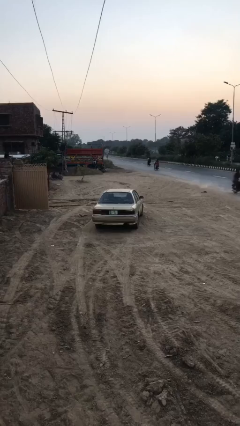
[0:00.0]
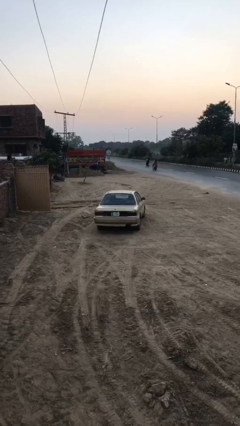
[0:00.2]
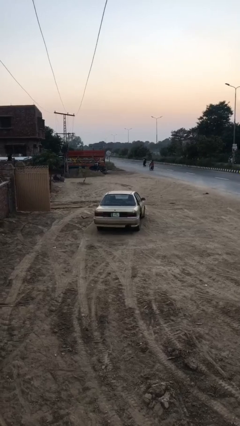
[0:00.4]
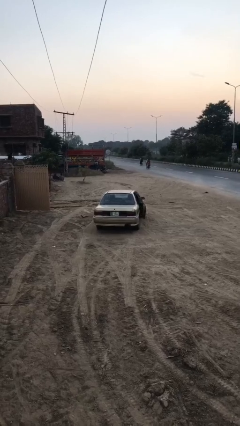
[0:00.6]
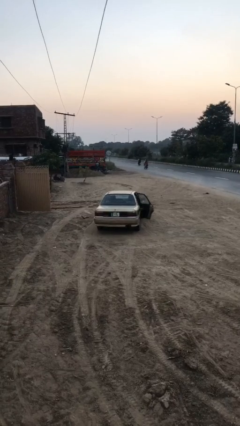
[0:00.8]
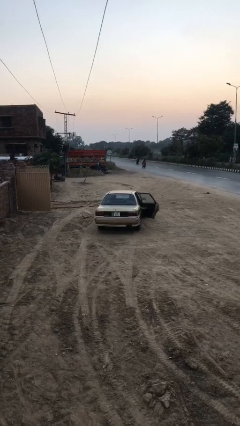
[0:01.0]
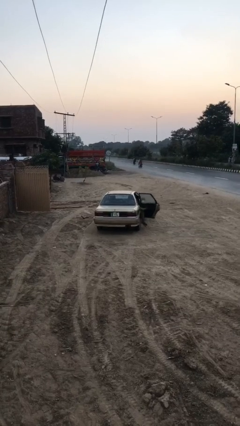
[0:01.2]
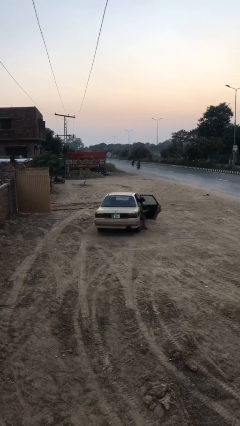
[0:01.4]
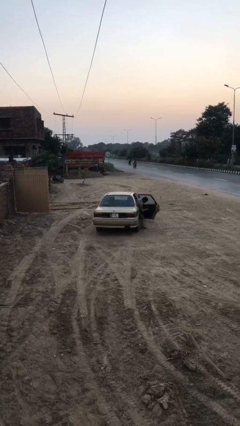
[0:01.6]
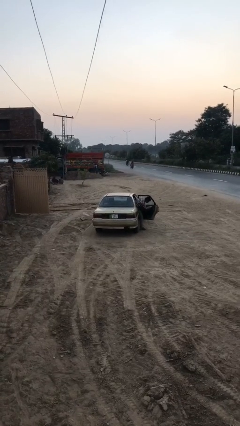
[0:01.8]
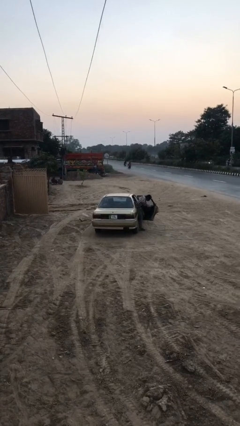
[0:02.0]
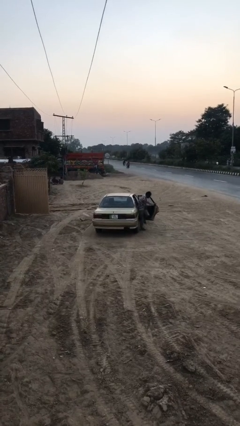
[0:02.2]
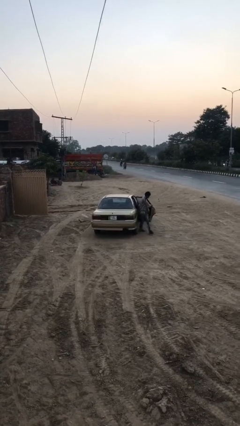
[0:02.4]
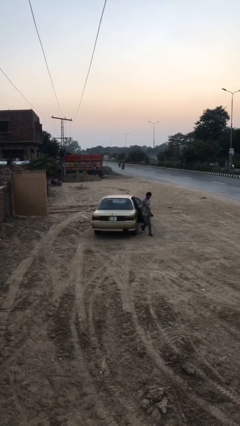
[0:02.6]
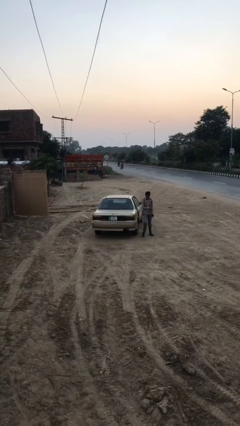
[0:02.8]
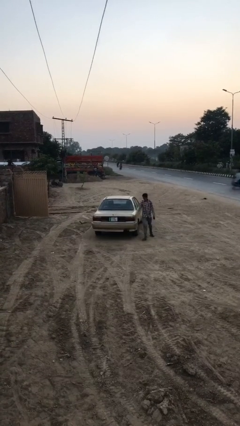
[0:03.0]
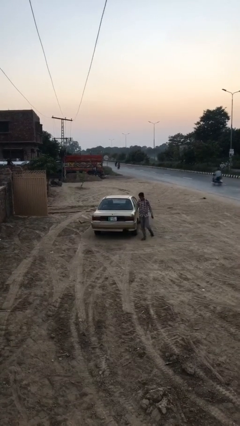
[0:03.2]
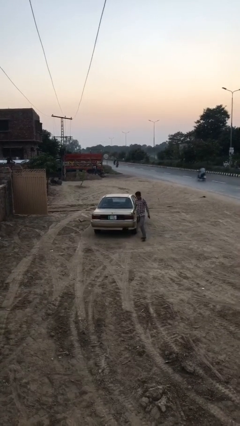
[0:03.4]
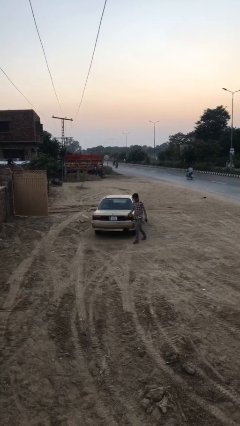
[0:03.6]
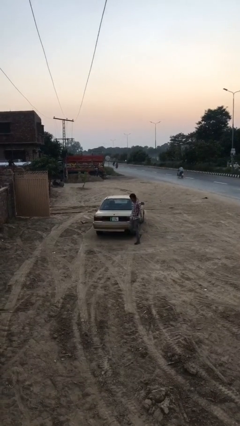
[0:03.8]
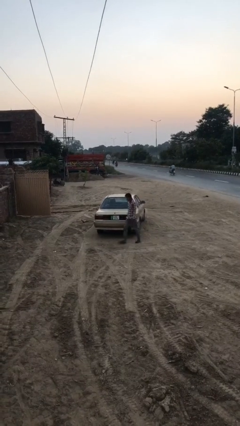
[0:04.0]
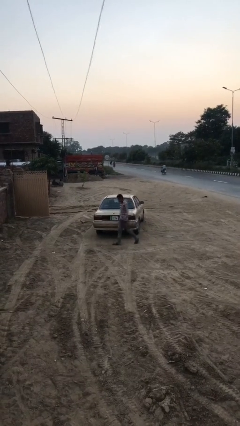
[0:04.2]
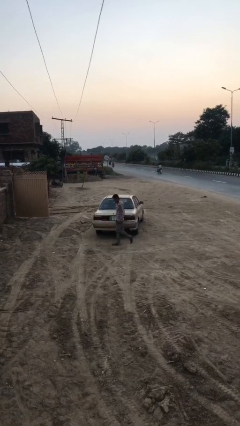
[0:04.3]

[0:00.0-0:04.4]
car drops off person

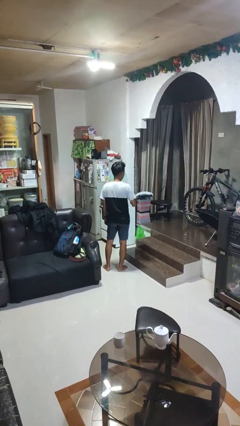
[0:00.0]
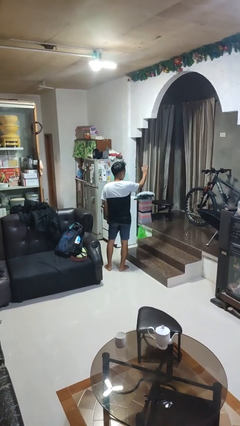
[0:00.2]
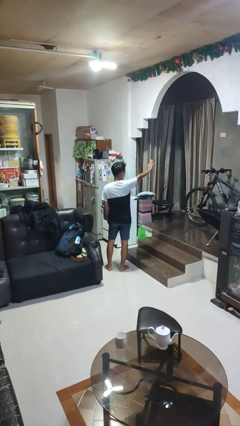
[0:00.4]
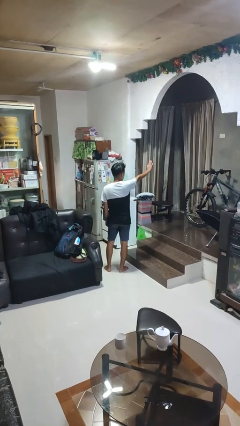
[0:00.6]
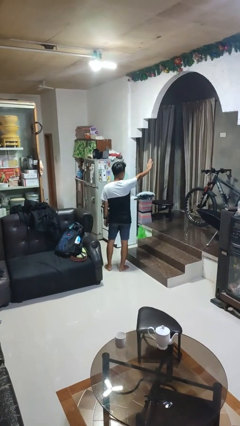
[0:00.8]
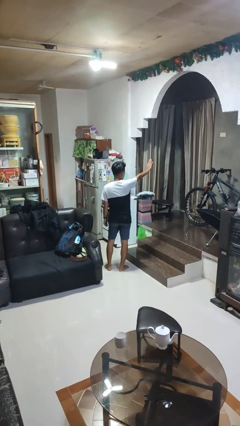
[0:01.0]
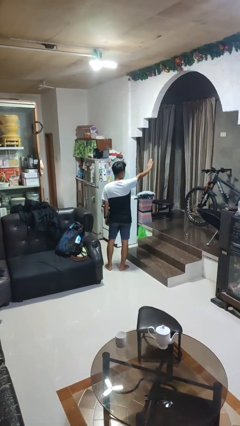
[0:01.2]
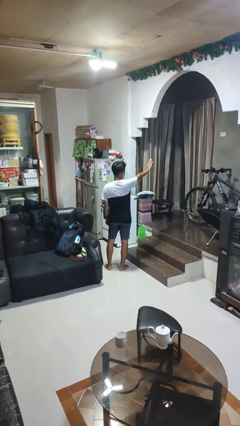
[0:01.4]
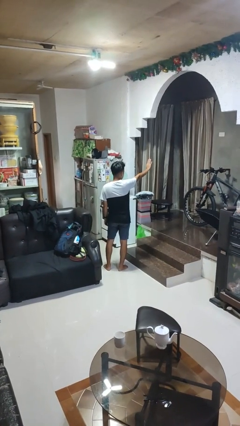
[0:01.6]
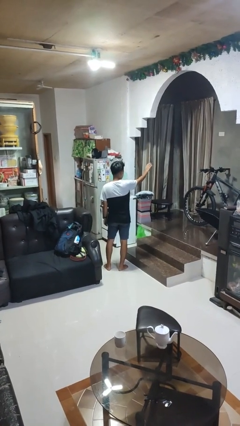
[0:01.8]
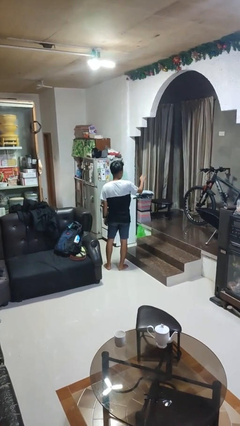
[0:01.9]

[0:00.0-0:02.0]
person gestures stop

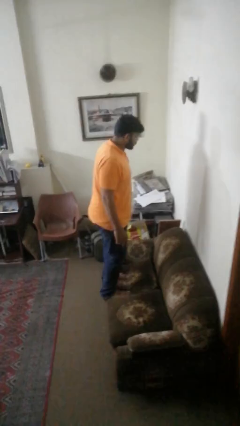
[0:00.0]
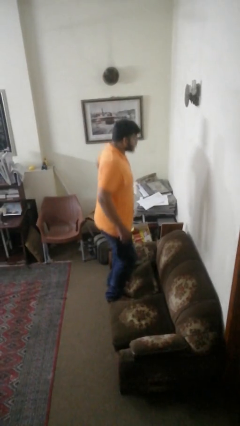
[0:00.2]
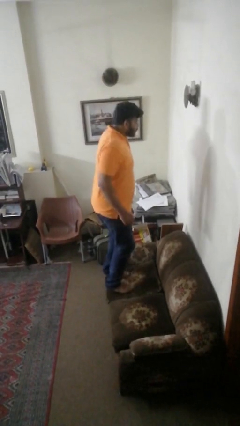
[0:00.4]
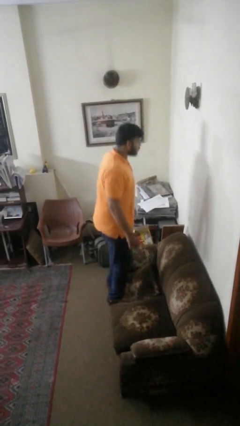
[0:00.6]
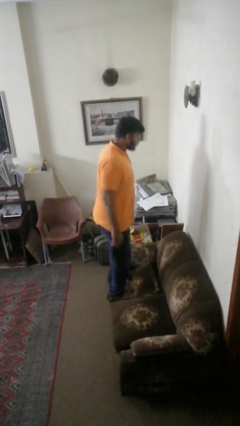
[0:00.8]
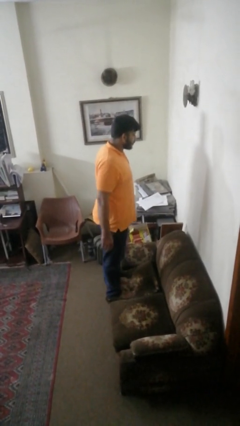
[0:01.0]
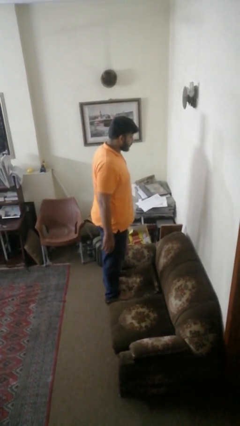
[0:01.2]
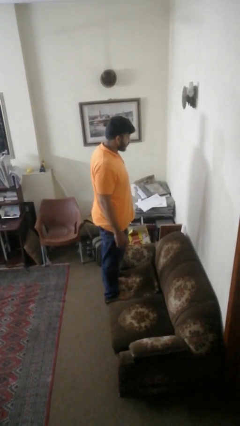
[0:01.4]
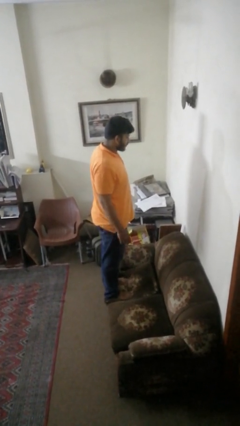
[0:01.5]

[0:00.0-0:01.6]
person jumps on couch

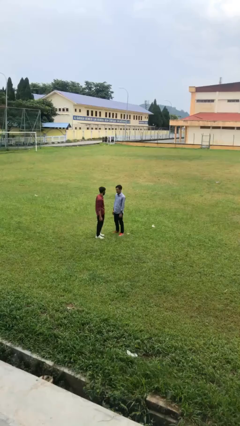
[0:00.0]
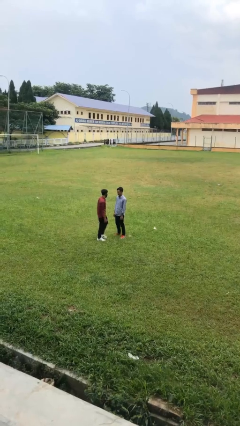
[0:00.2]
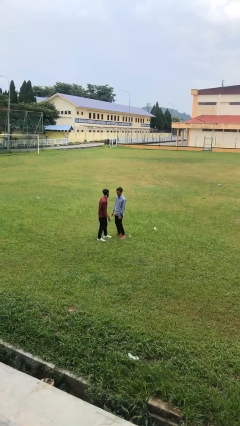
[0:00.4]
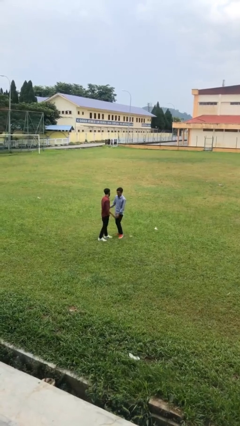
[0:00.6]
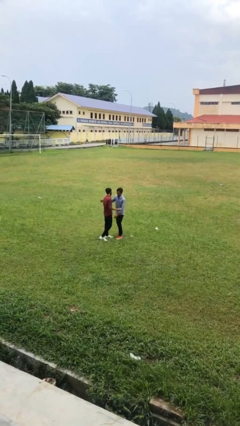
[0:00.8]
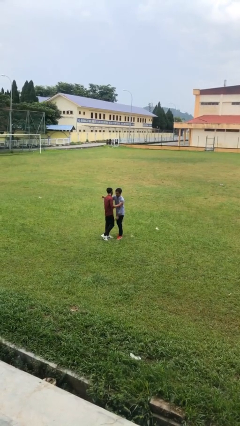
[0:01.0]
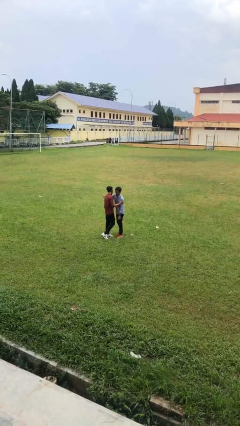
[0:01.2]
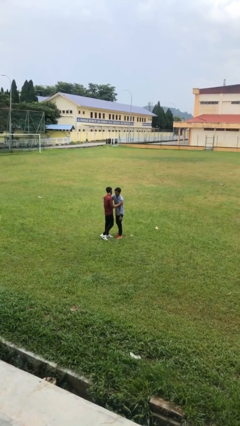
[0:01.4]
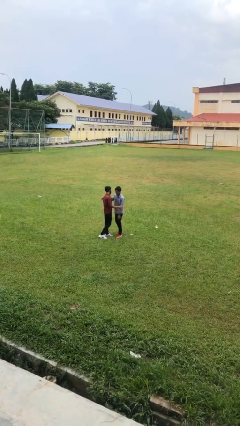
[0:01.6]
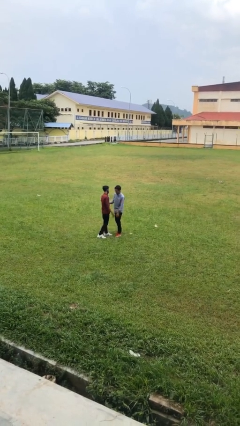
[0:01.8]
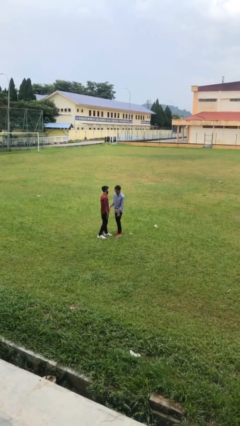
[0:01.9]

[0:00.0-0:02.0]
person embraces person

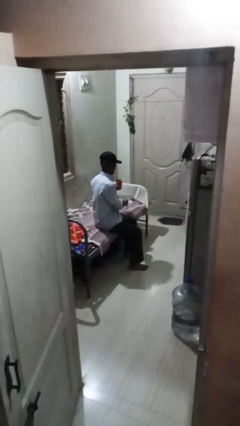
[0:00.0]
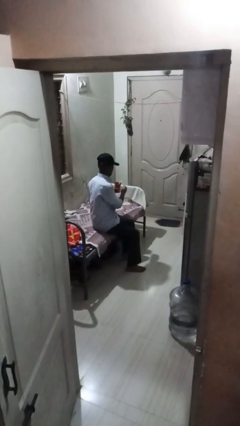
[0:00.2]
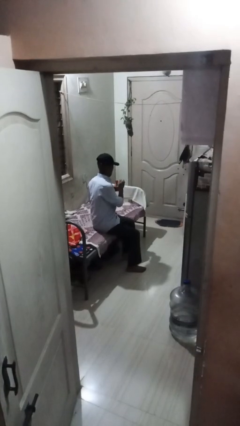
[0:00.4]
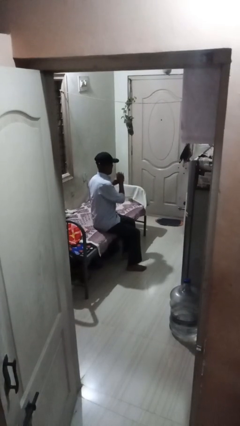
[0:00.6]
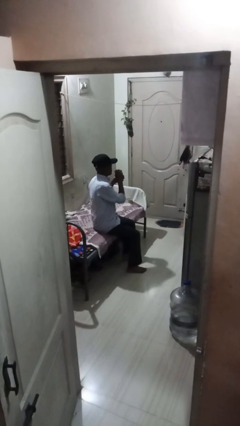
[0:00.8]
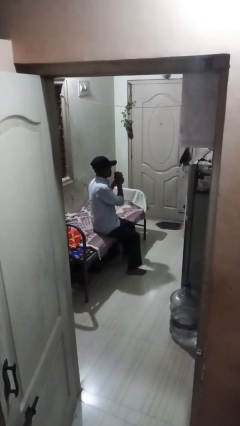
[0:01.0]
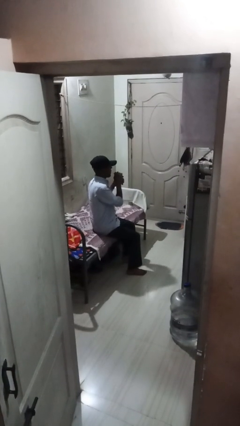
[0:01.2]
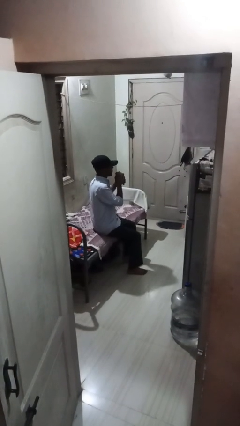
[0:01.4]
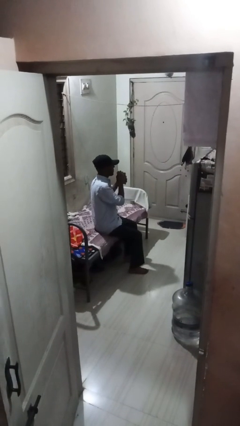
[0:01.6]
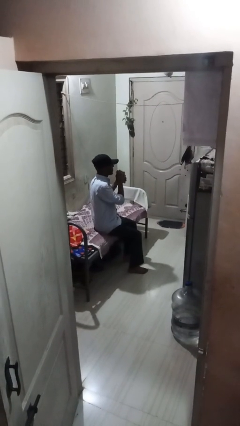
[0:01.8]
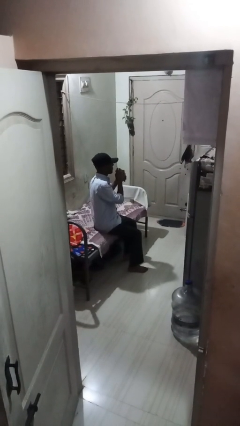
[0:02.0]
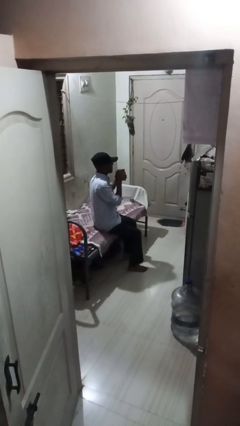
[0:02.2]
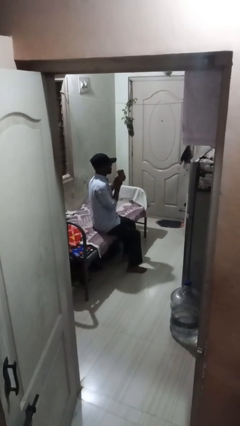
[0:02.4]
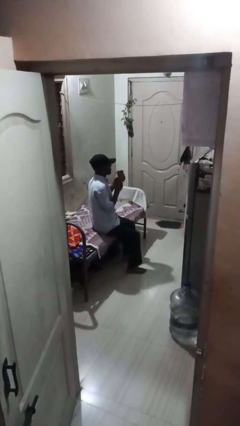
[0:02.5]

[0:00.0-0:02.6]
person drinks from straw

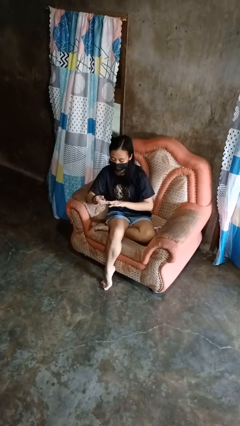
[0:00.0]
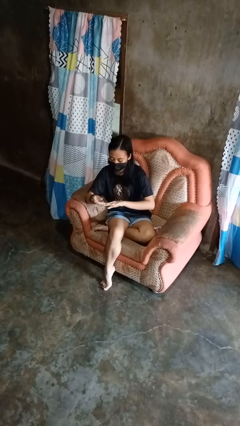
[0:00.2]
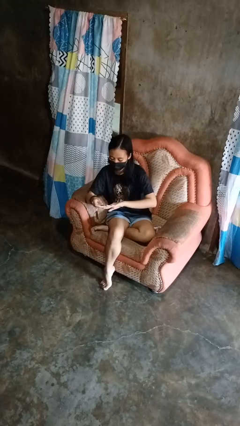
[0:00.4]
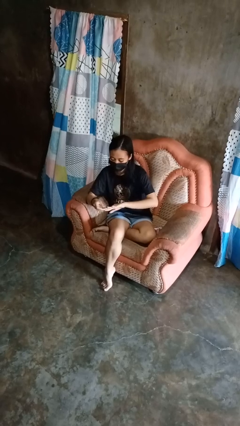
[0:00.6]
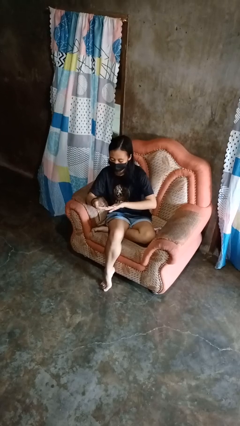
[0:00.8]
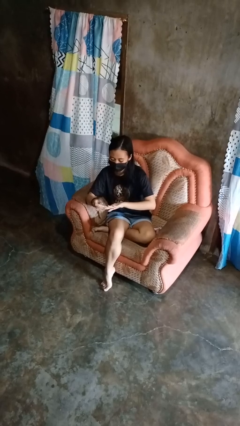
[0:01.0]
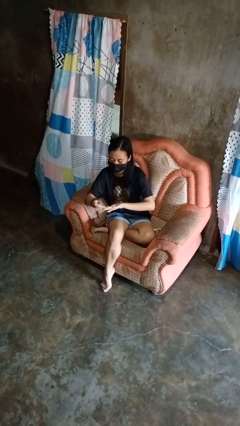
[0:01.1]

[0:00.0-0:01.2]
person clips fingernails

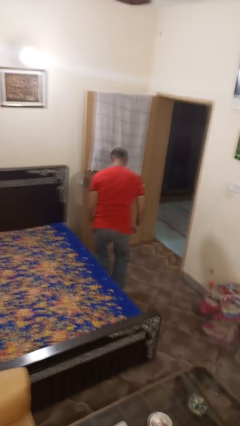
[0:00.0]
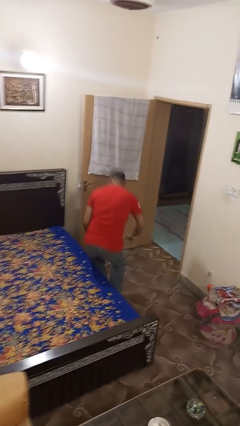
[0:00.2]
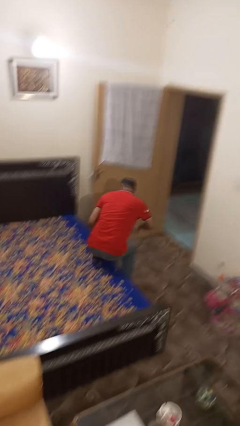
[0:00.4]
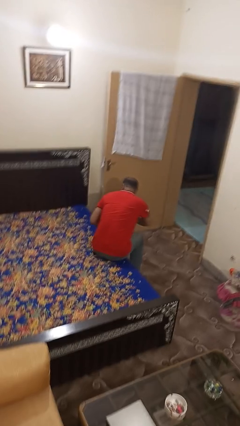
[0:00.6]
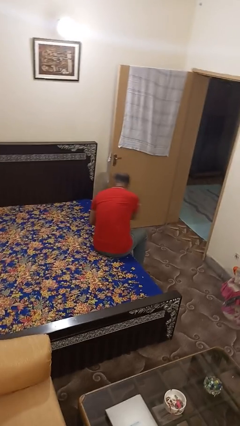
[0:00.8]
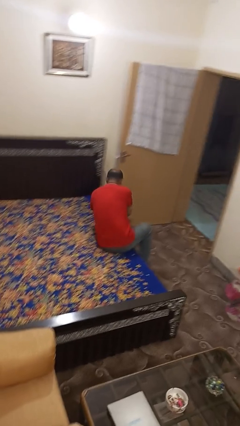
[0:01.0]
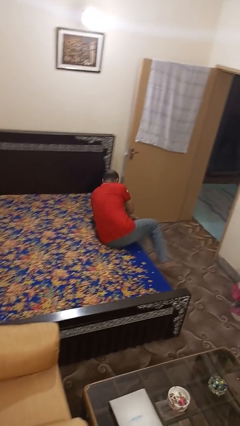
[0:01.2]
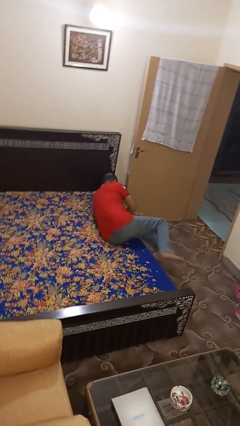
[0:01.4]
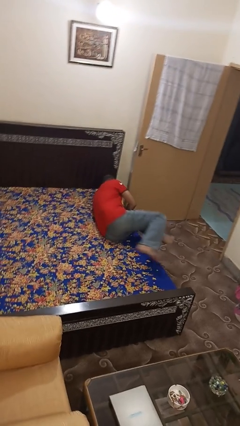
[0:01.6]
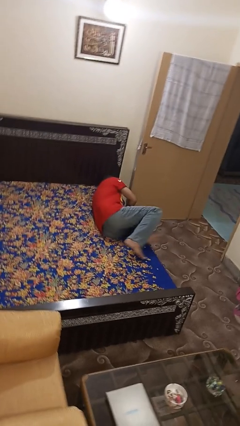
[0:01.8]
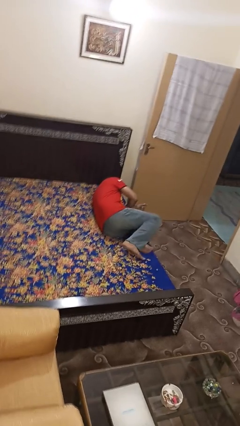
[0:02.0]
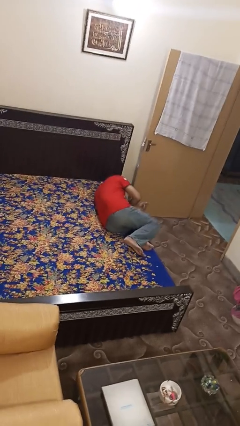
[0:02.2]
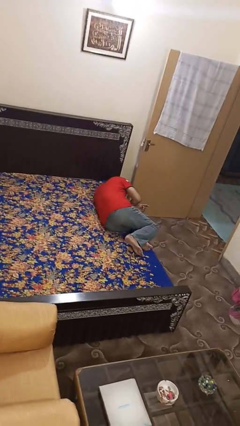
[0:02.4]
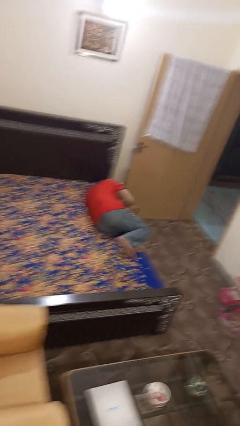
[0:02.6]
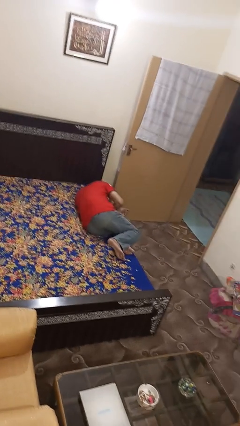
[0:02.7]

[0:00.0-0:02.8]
person lies down on bed

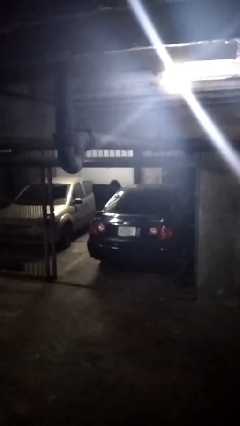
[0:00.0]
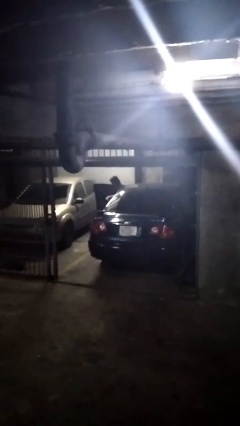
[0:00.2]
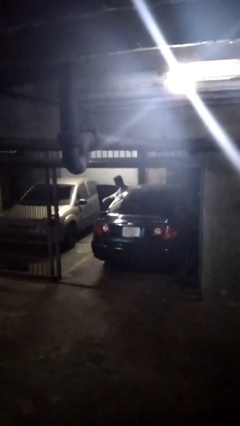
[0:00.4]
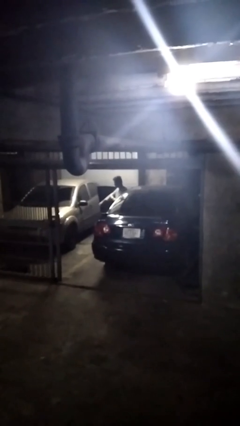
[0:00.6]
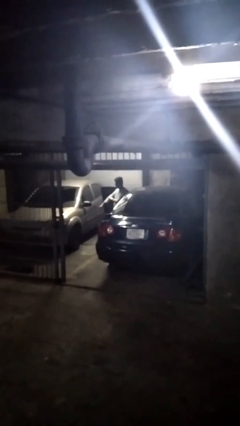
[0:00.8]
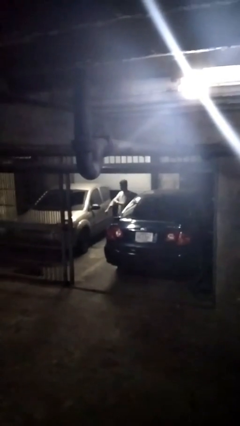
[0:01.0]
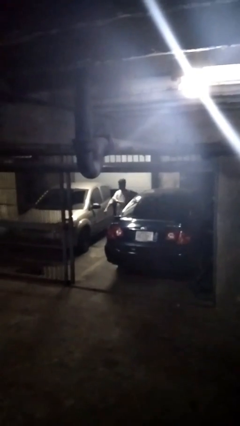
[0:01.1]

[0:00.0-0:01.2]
person exits car
